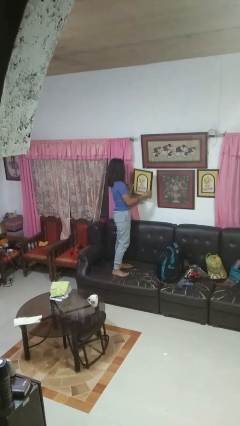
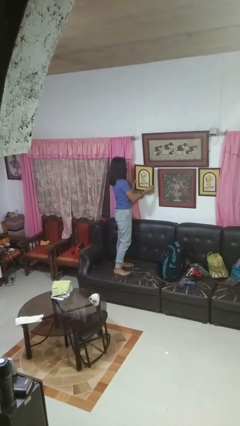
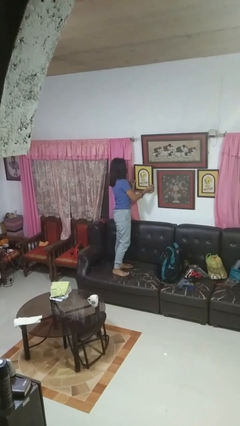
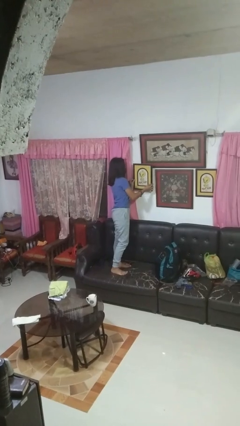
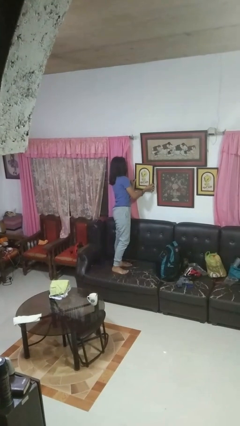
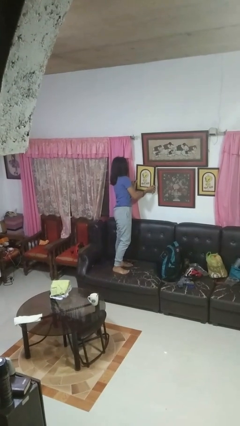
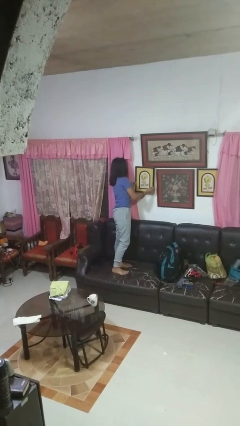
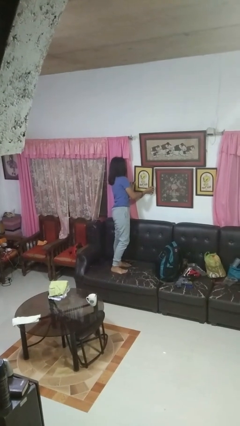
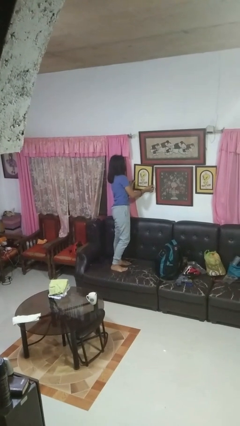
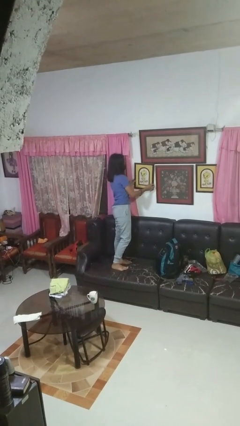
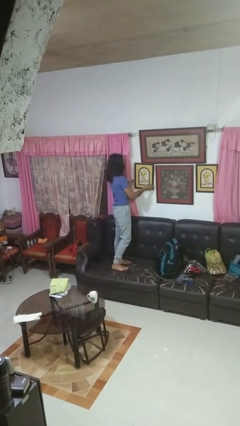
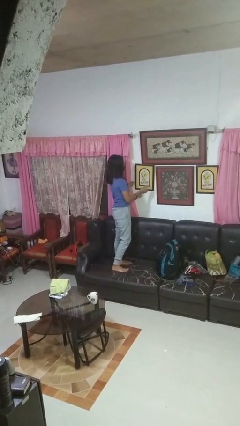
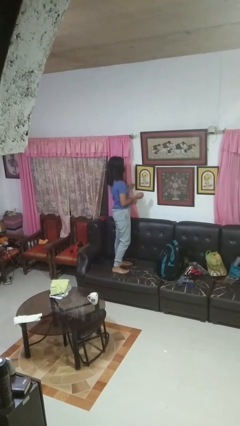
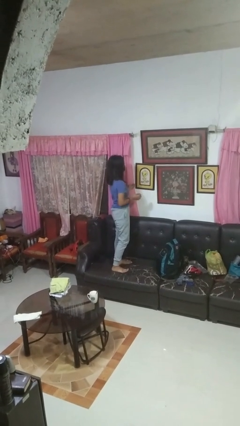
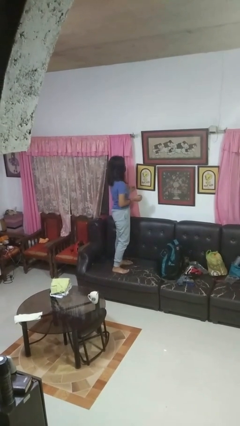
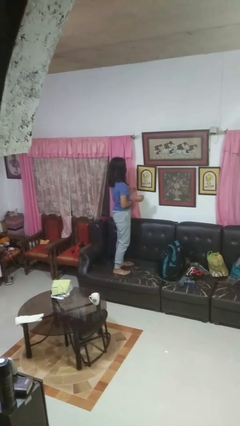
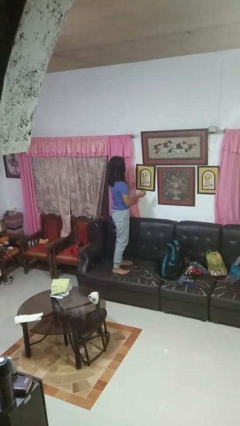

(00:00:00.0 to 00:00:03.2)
person puts up picture frame

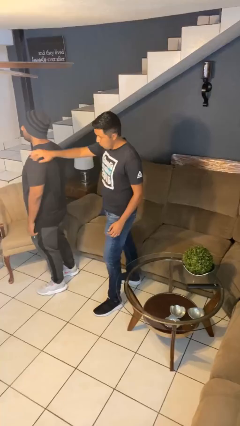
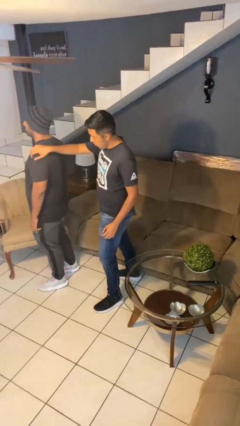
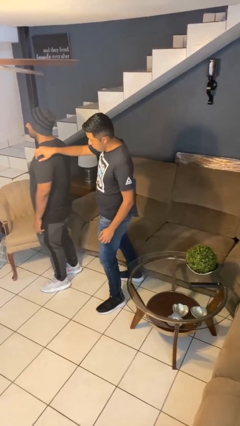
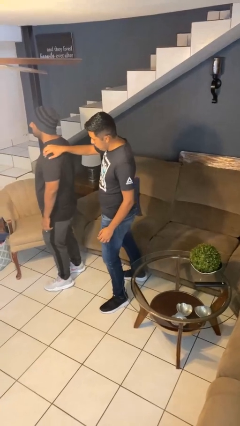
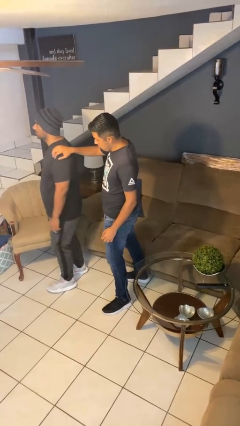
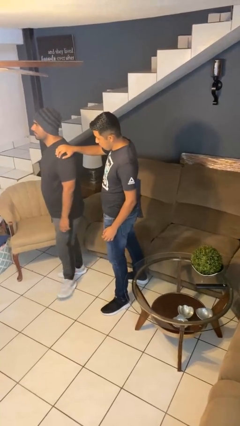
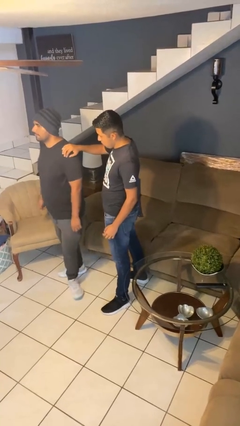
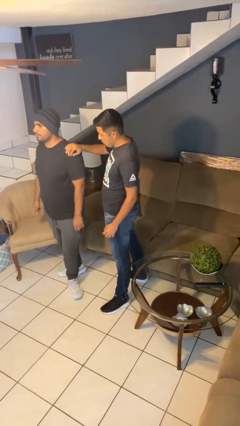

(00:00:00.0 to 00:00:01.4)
person grabs person by shoulder

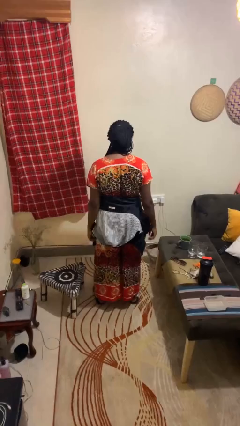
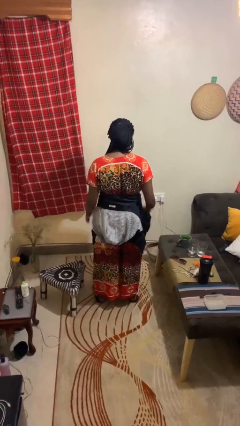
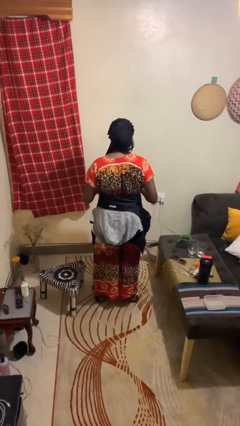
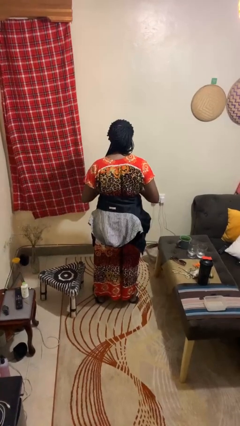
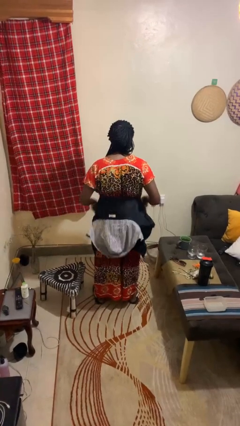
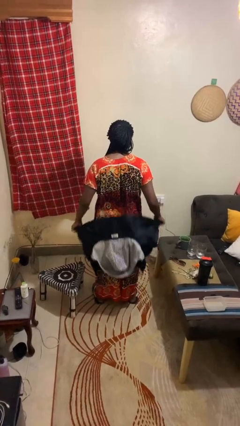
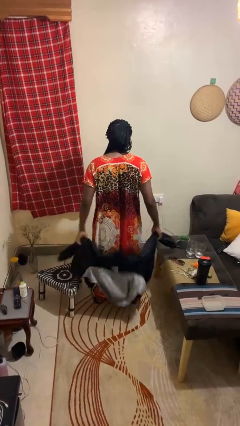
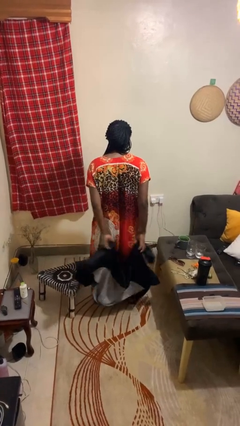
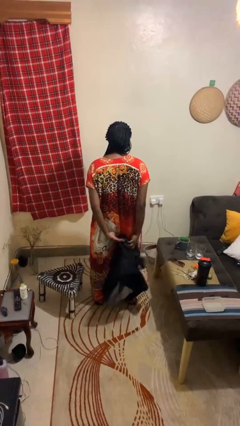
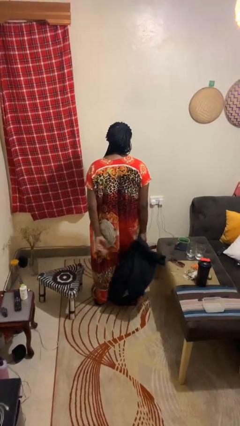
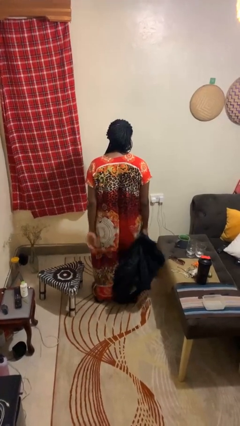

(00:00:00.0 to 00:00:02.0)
person unties jacket around waist

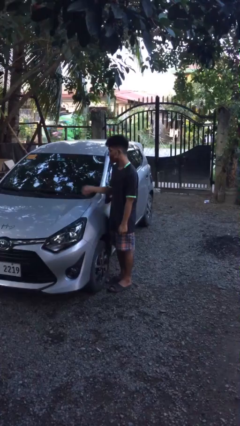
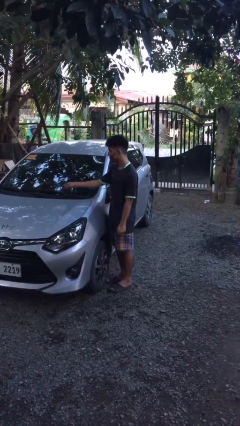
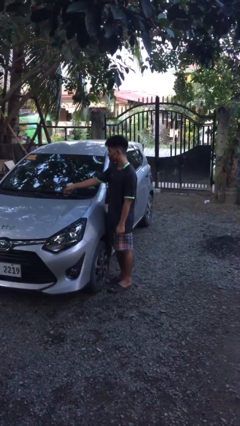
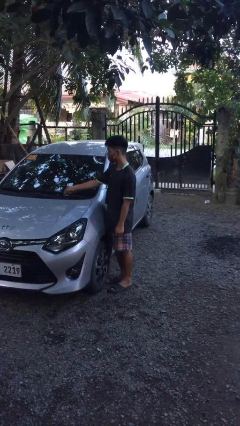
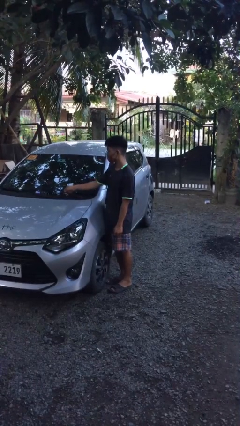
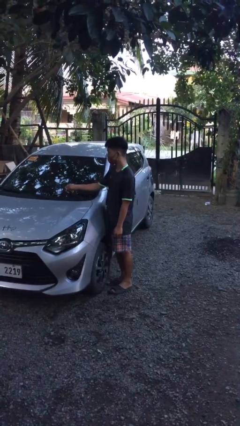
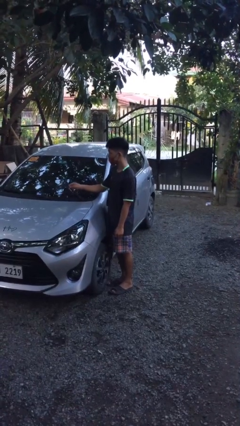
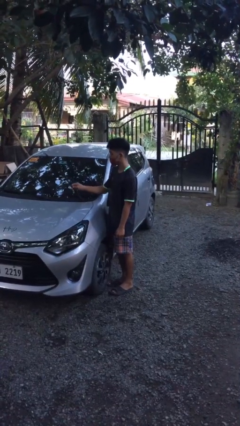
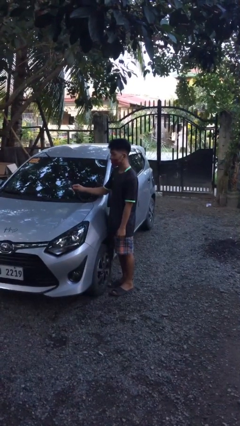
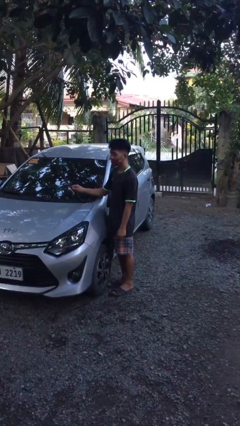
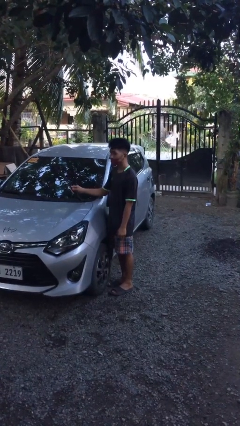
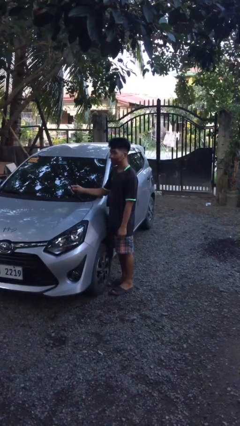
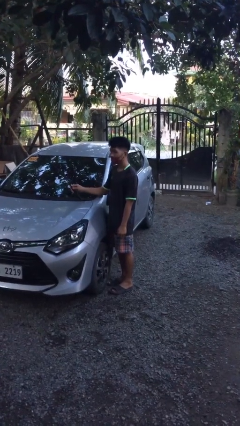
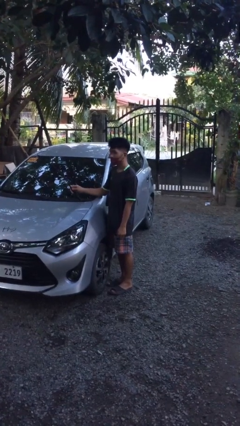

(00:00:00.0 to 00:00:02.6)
person flips up car wipers

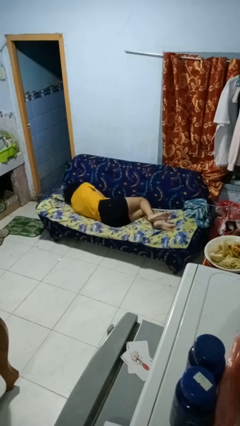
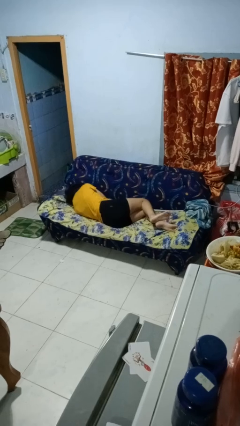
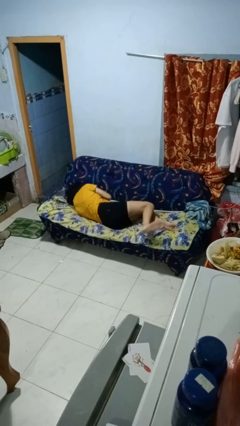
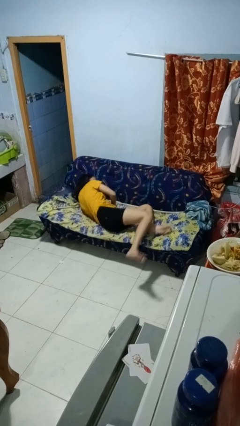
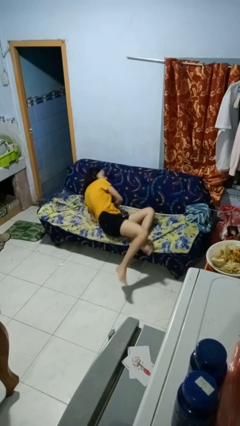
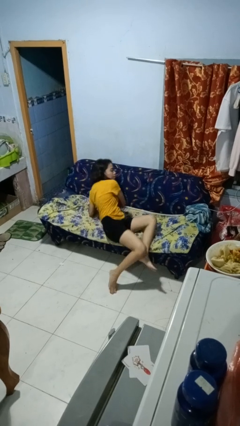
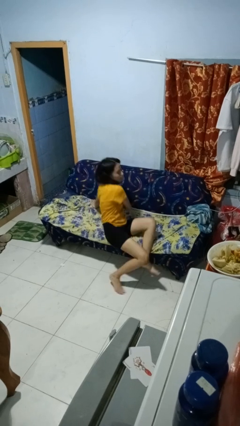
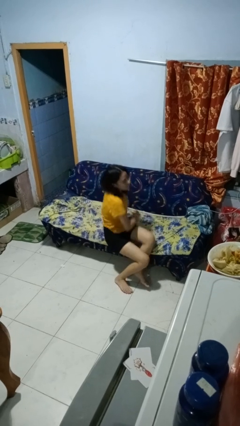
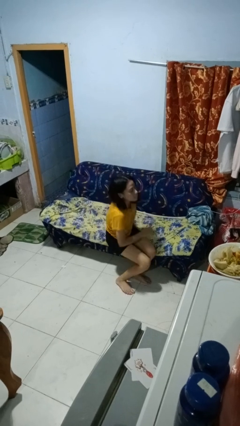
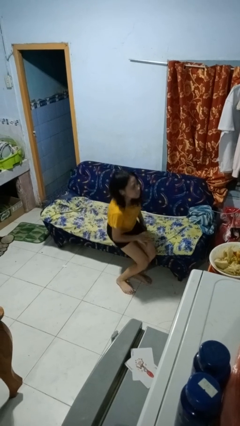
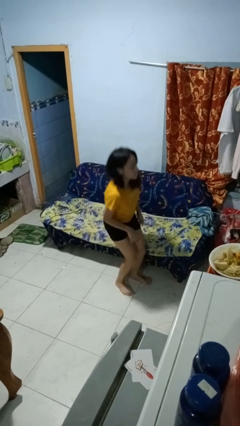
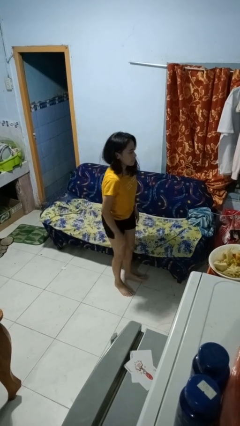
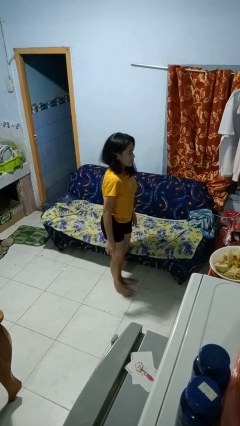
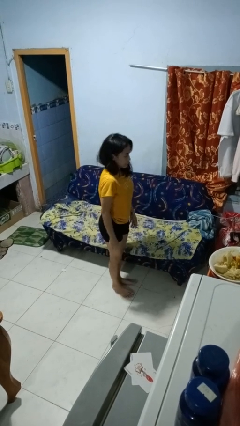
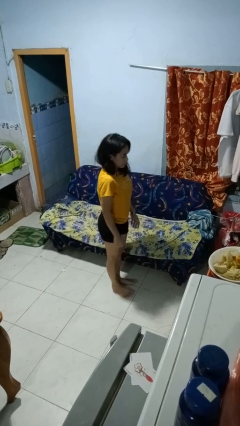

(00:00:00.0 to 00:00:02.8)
person stands up

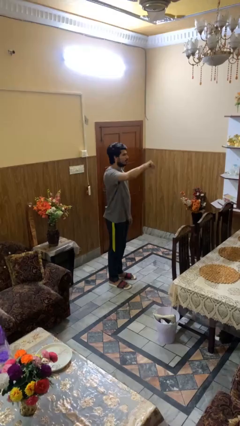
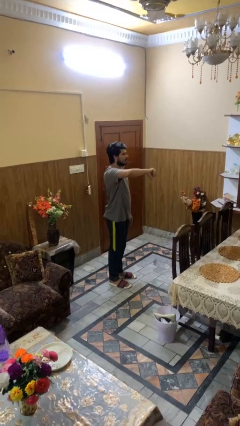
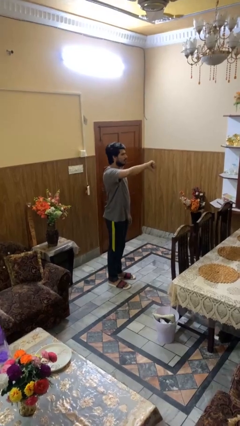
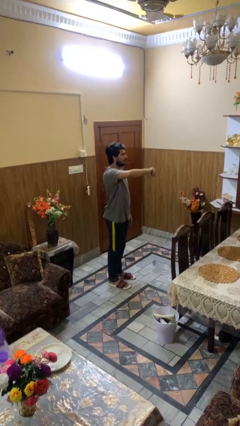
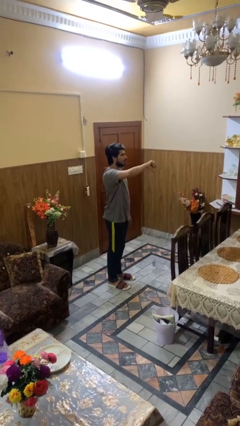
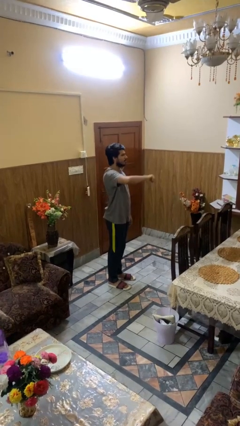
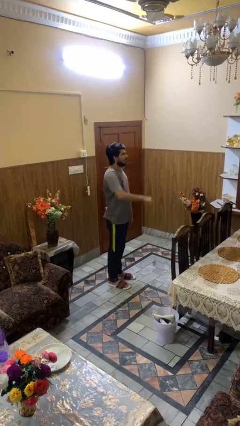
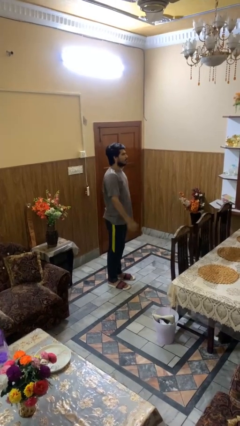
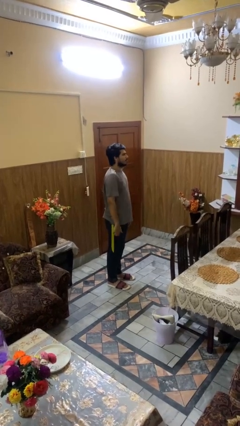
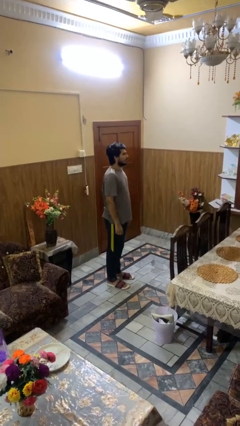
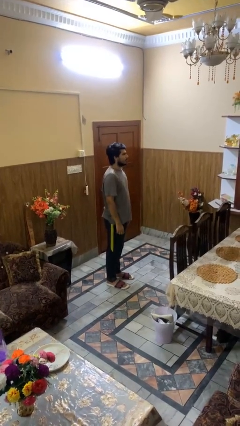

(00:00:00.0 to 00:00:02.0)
person gestures thumbs down

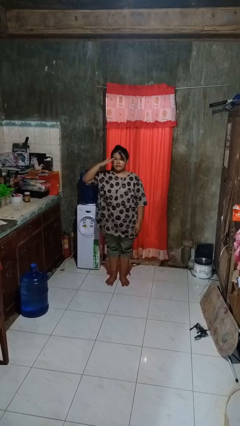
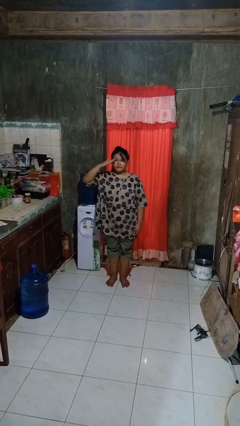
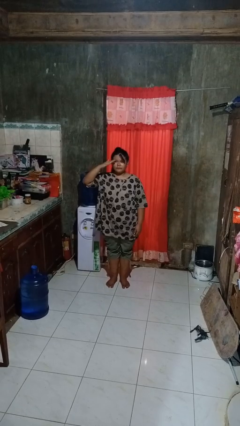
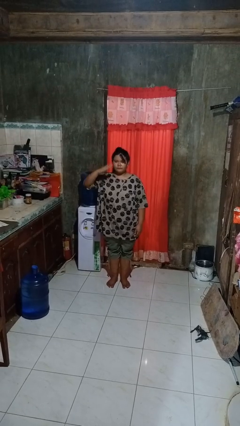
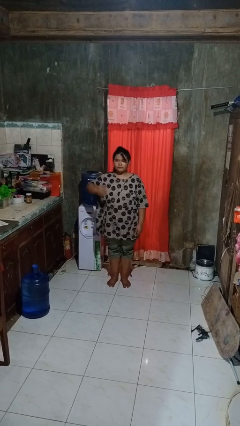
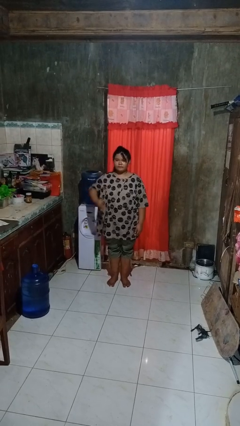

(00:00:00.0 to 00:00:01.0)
person salutes

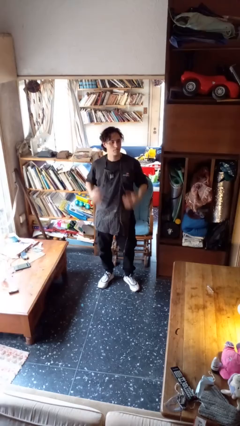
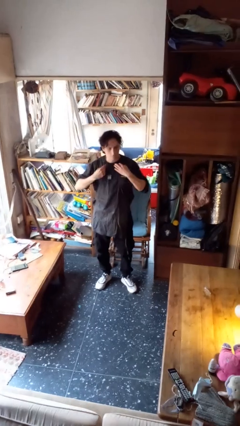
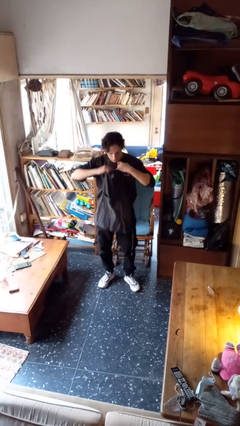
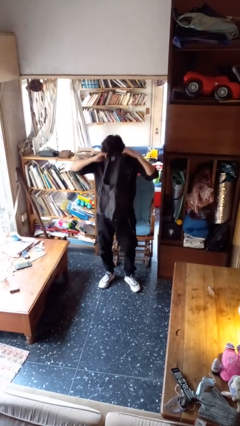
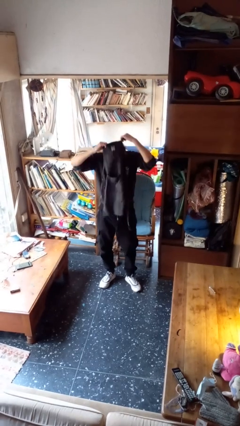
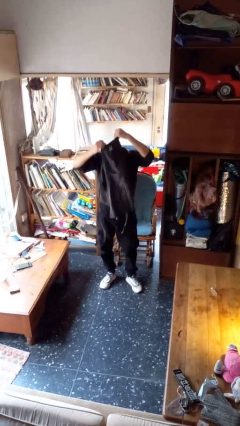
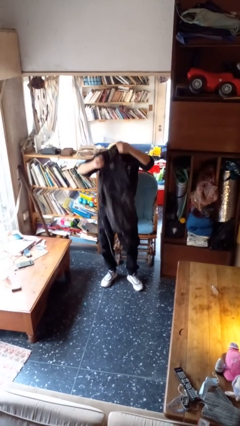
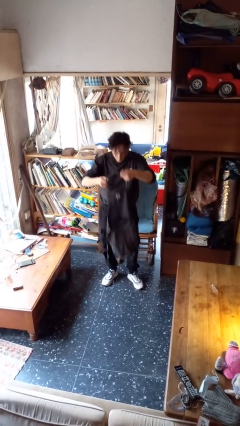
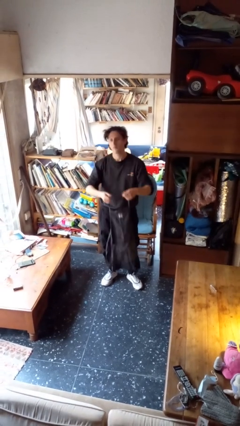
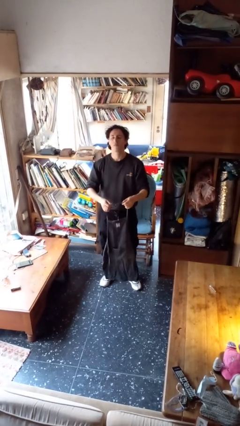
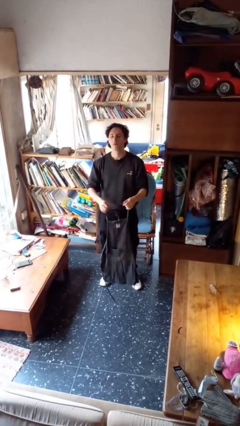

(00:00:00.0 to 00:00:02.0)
person takes off apron
